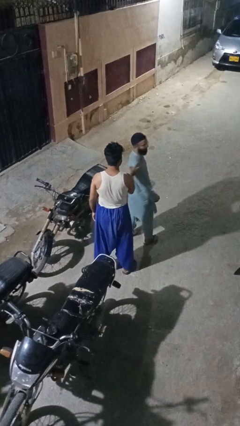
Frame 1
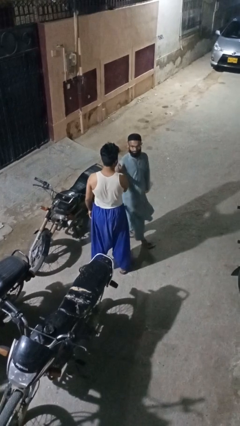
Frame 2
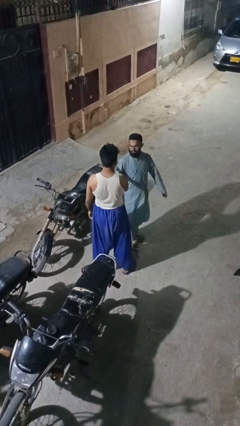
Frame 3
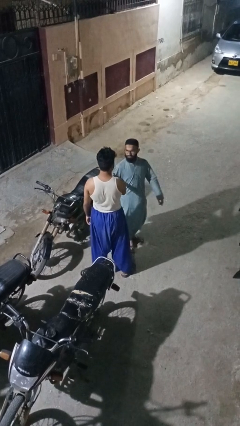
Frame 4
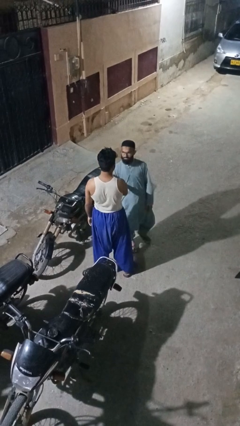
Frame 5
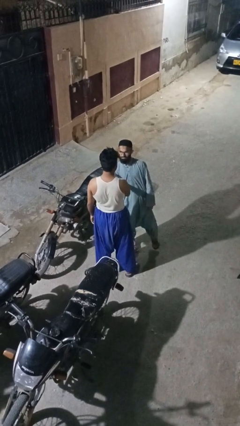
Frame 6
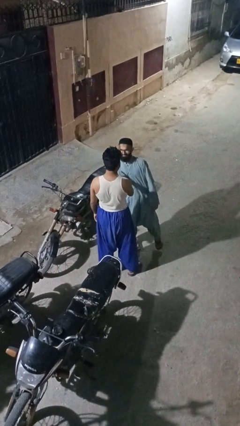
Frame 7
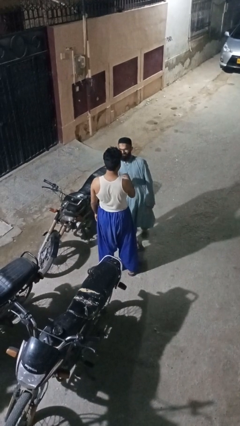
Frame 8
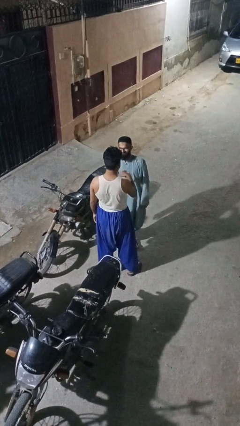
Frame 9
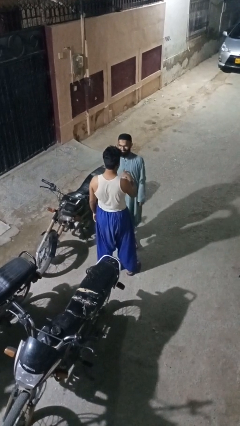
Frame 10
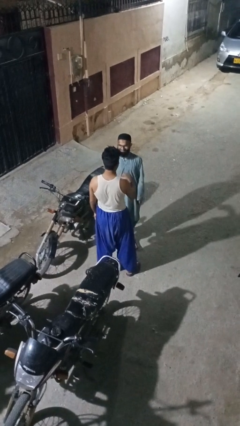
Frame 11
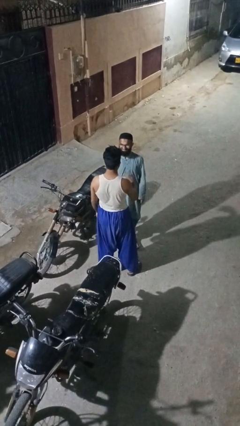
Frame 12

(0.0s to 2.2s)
person spins person around

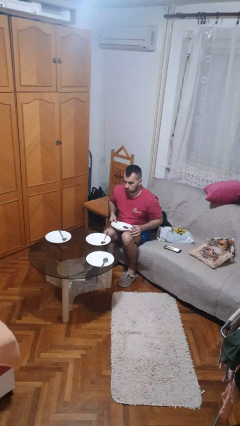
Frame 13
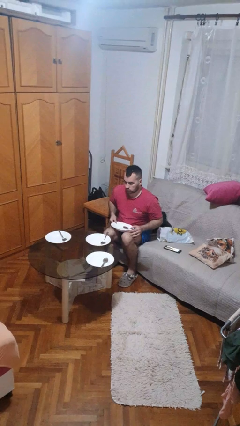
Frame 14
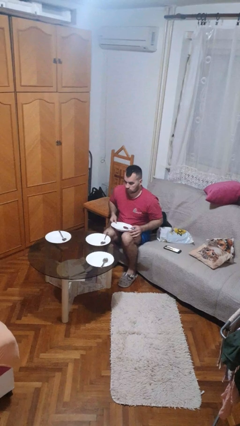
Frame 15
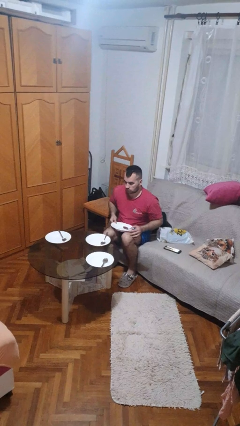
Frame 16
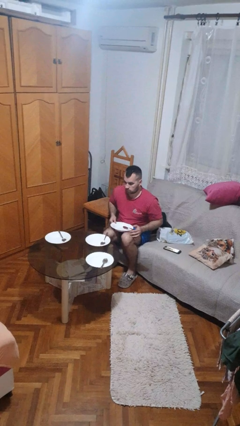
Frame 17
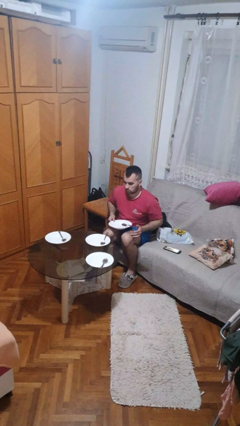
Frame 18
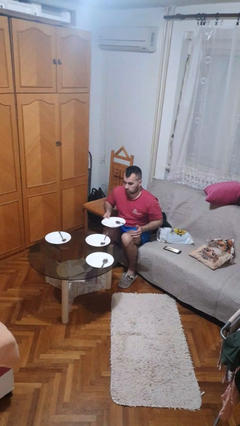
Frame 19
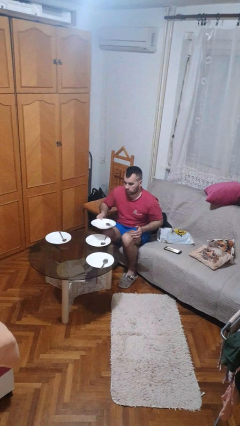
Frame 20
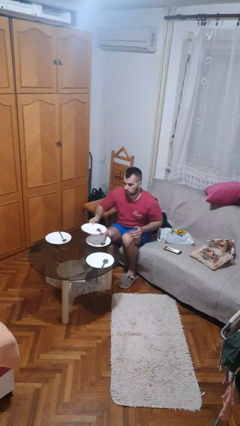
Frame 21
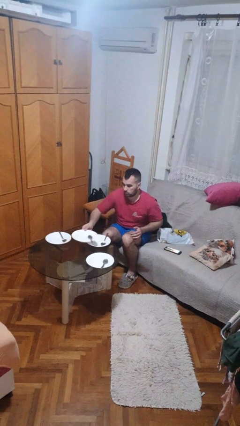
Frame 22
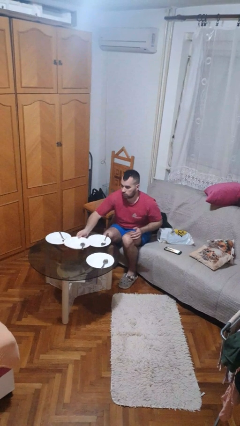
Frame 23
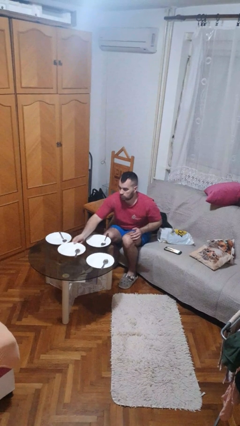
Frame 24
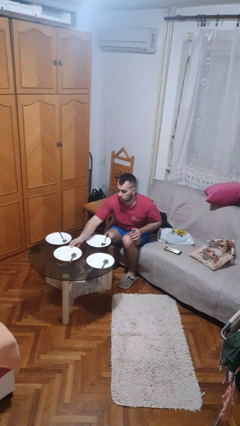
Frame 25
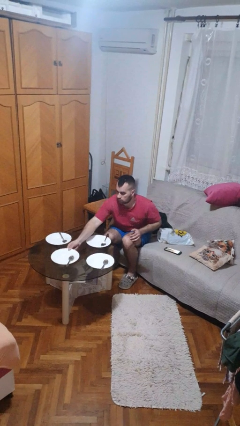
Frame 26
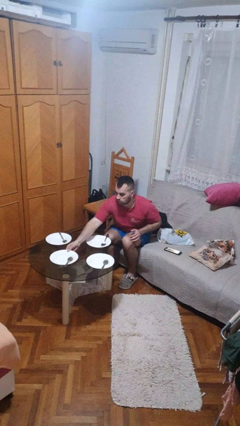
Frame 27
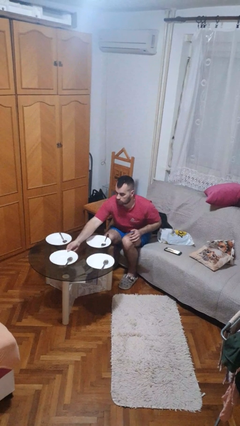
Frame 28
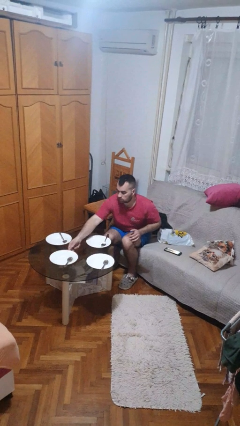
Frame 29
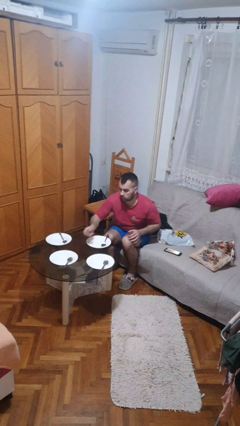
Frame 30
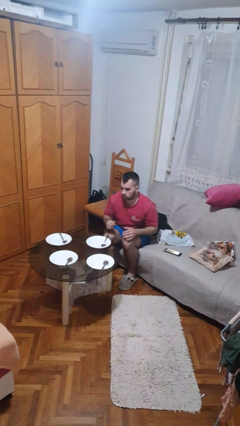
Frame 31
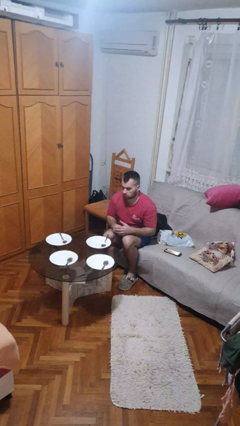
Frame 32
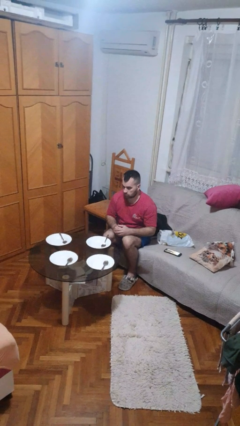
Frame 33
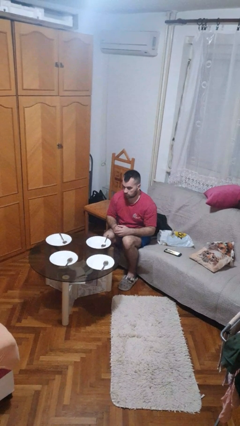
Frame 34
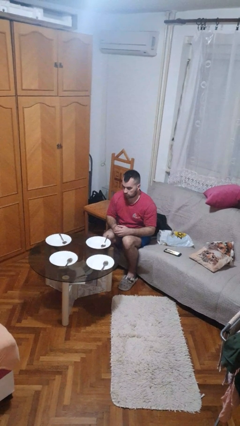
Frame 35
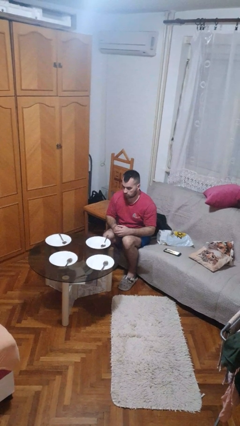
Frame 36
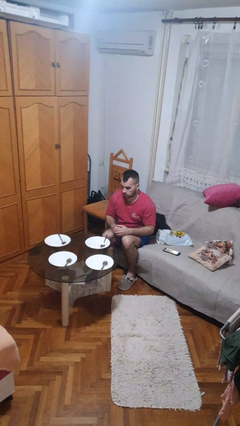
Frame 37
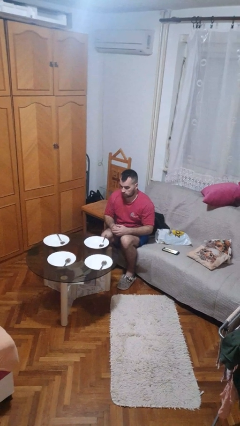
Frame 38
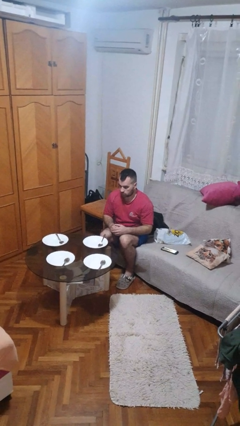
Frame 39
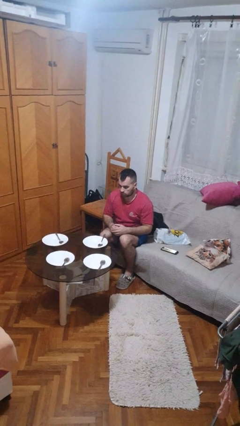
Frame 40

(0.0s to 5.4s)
person sets table

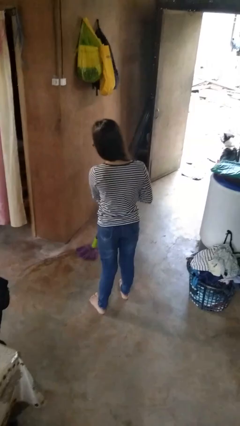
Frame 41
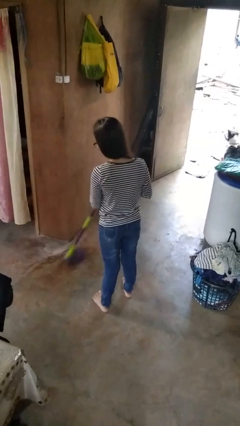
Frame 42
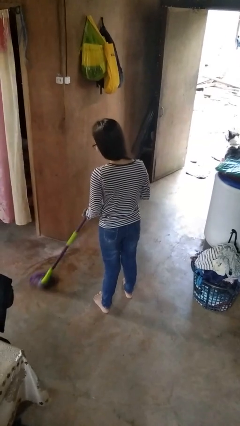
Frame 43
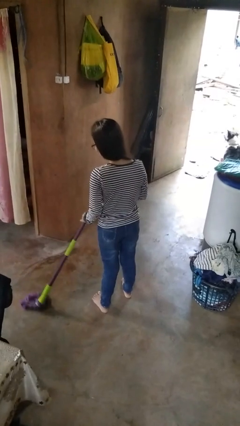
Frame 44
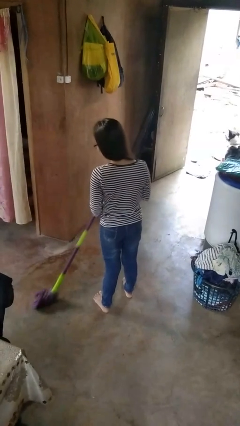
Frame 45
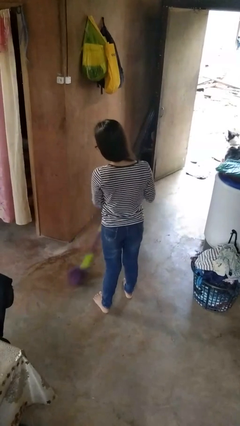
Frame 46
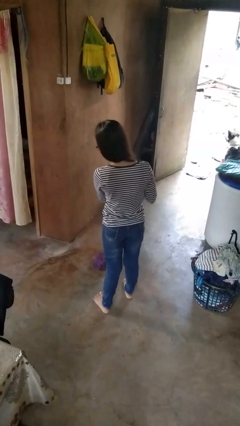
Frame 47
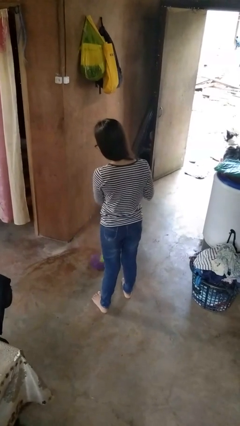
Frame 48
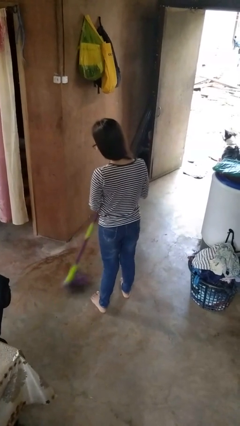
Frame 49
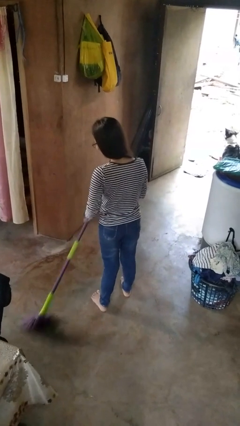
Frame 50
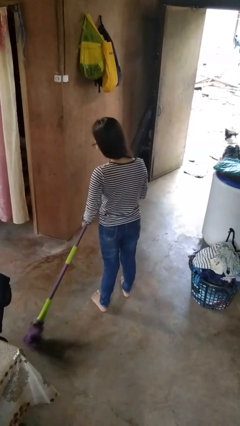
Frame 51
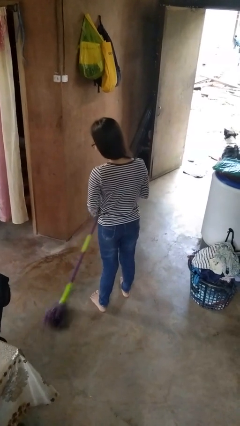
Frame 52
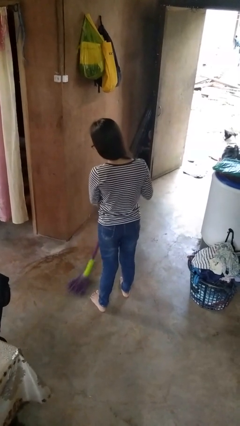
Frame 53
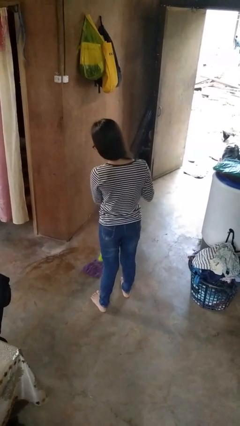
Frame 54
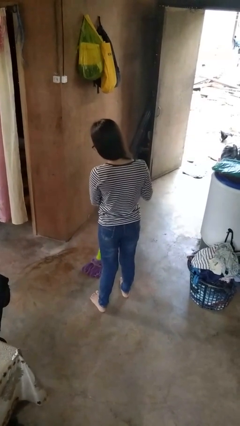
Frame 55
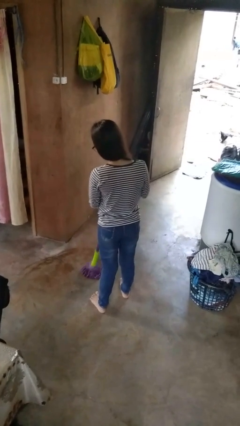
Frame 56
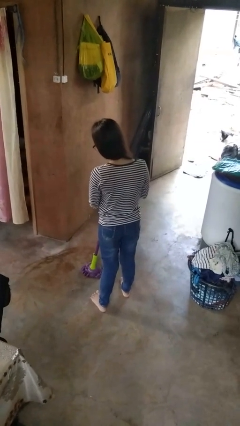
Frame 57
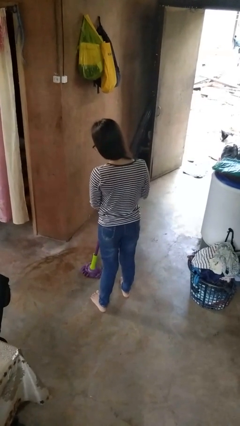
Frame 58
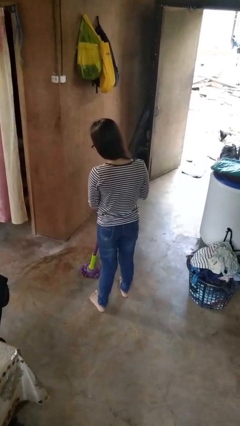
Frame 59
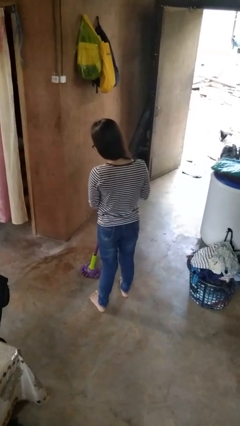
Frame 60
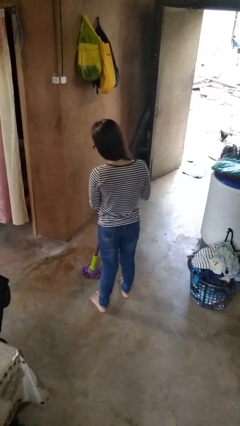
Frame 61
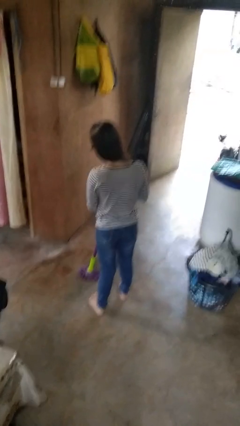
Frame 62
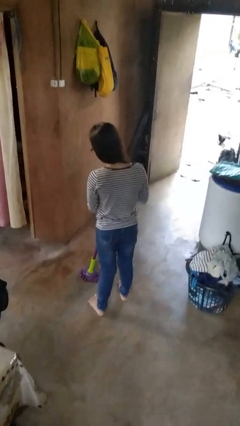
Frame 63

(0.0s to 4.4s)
person mops

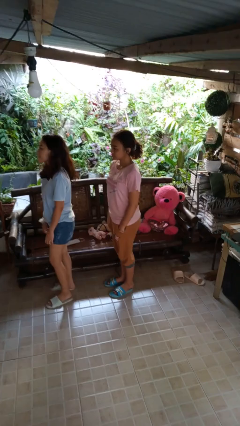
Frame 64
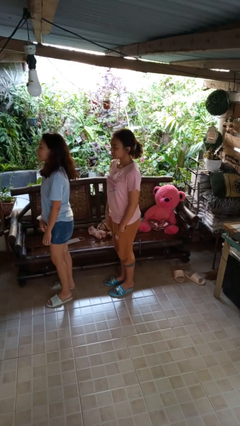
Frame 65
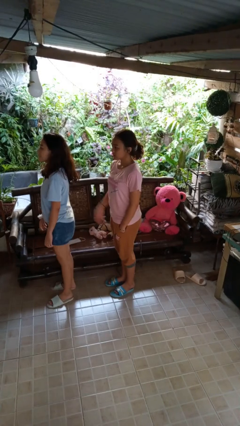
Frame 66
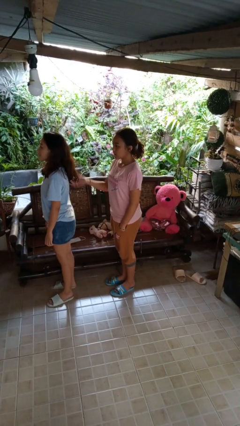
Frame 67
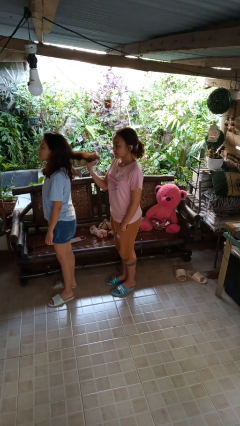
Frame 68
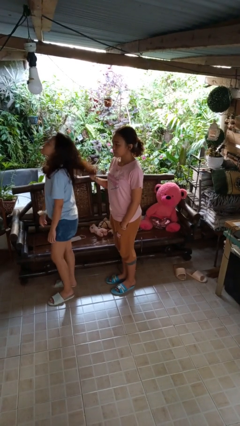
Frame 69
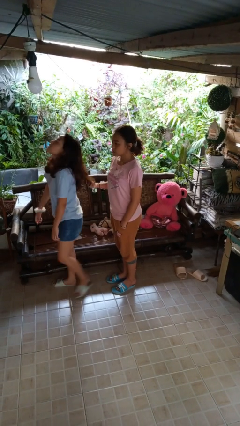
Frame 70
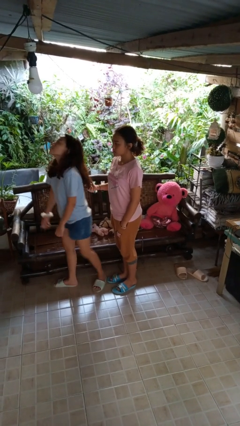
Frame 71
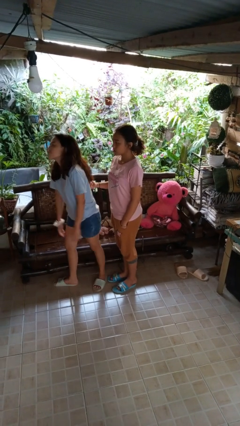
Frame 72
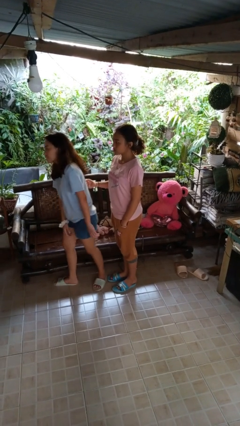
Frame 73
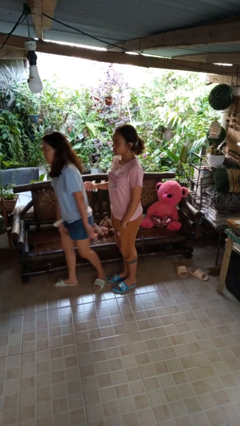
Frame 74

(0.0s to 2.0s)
person grabs person by hair

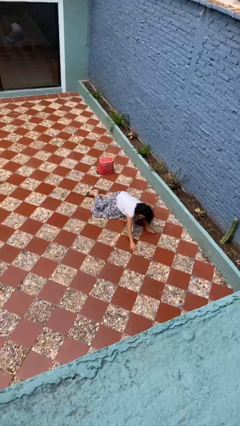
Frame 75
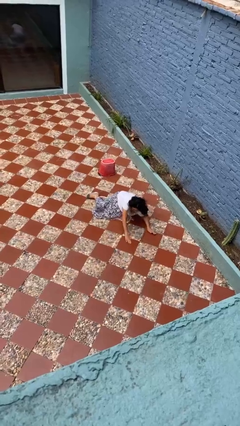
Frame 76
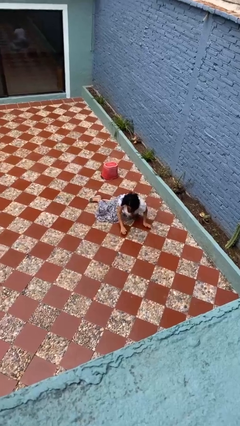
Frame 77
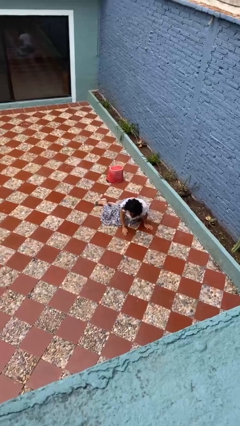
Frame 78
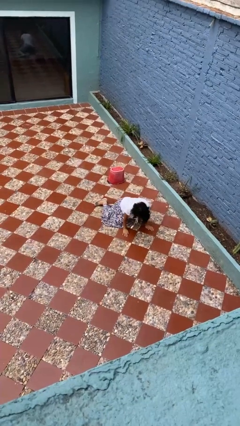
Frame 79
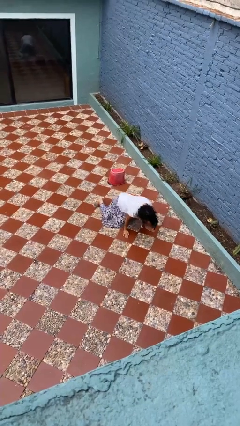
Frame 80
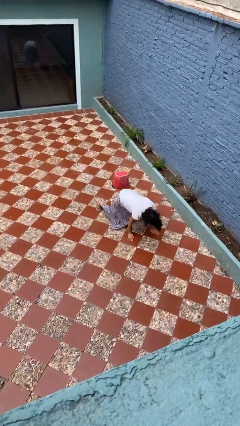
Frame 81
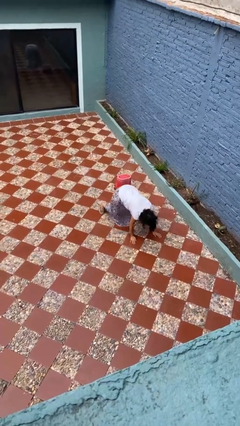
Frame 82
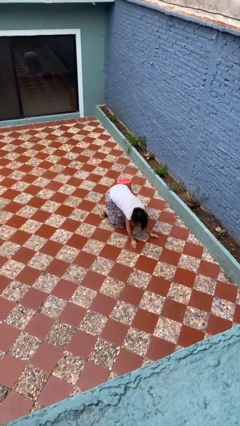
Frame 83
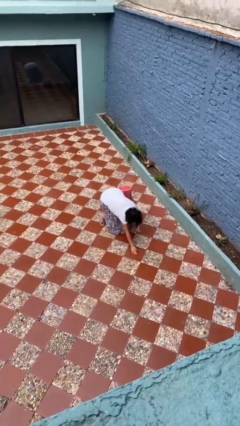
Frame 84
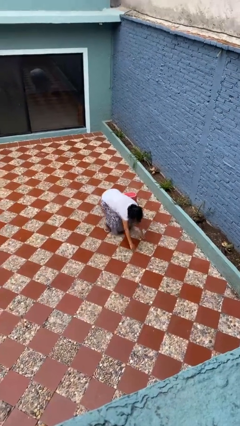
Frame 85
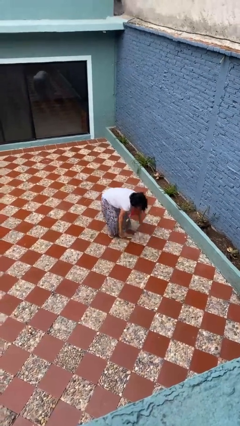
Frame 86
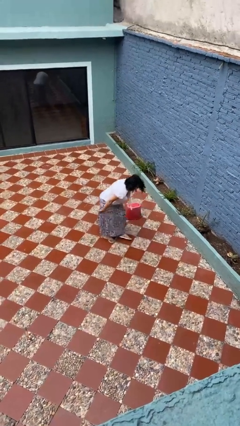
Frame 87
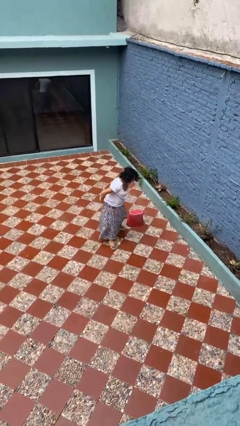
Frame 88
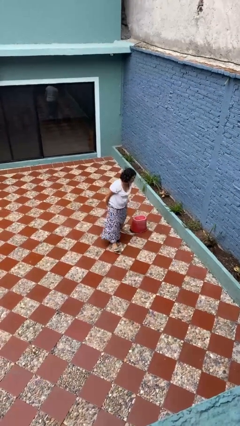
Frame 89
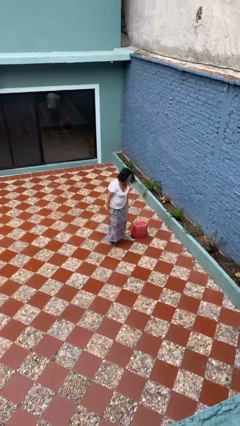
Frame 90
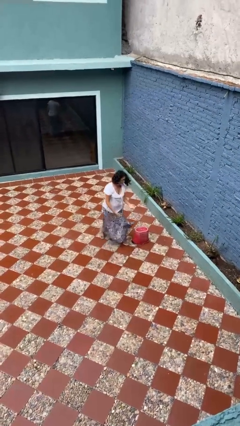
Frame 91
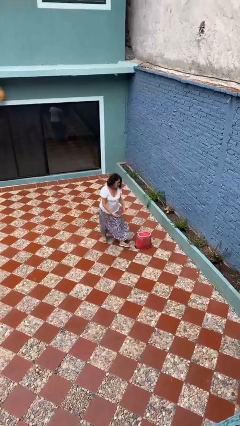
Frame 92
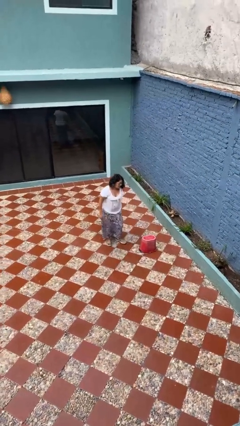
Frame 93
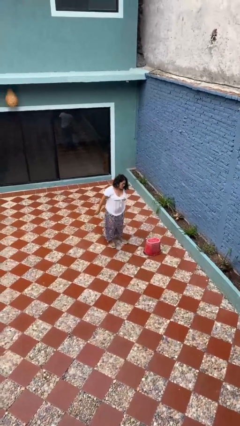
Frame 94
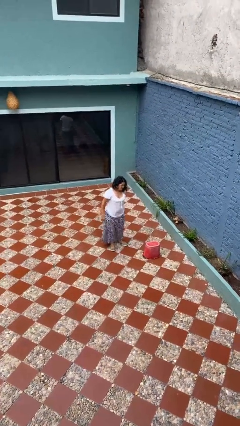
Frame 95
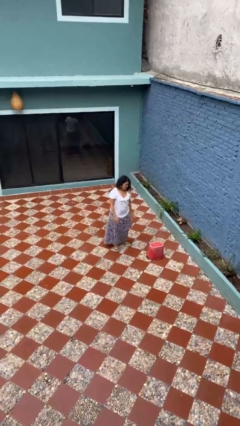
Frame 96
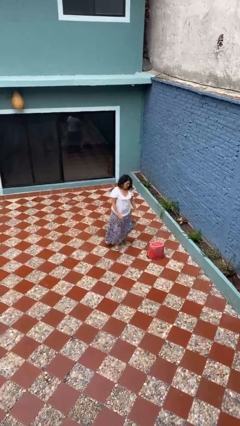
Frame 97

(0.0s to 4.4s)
person stands up from floor
